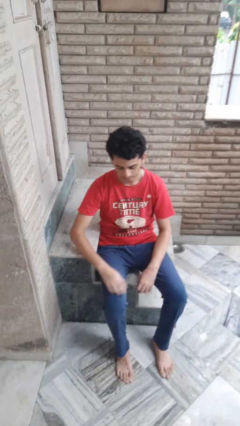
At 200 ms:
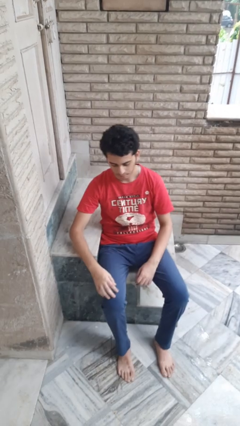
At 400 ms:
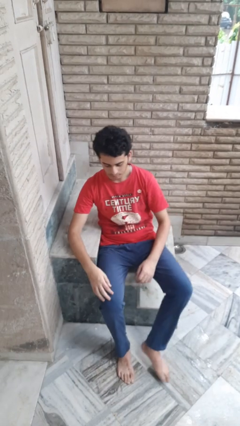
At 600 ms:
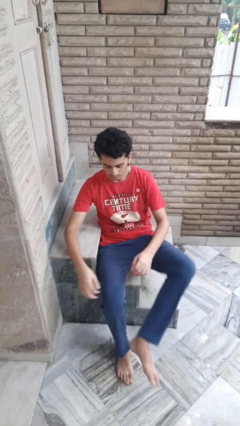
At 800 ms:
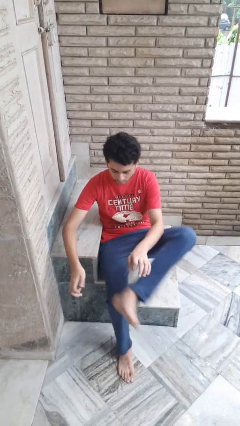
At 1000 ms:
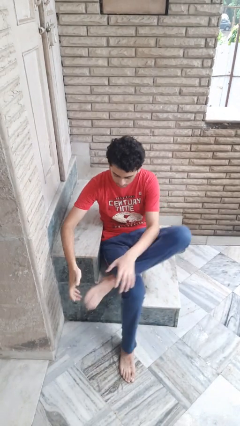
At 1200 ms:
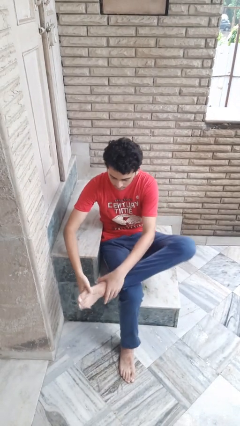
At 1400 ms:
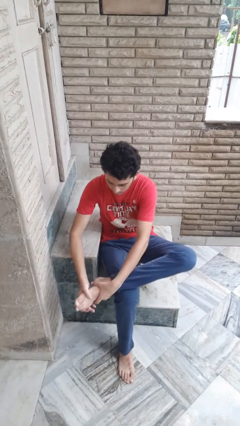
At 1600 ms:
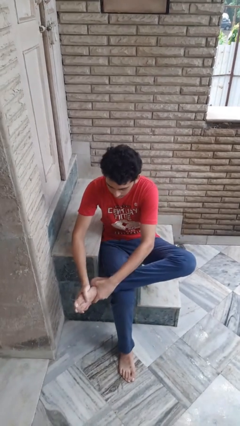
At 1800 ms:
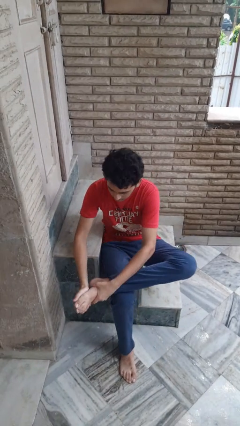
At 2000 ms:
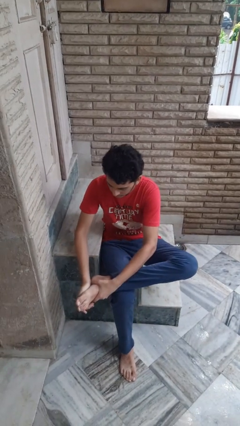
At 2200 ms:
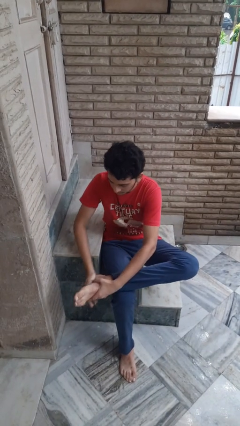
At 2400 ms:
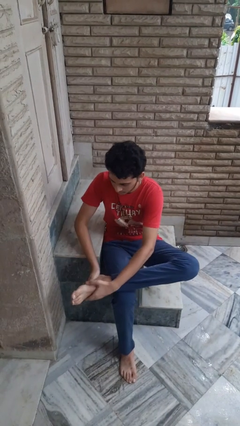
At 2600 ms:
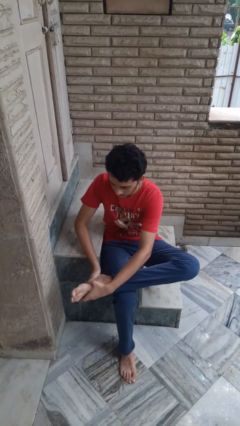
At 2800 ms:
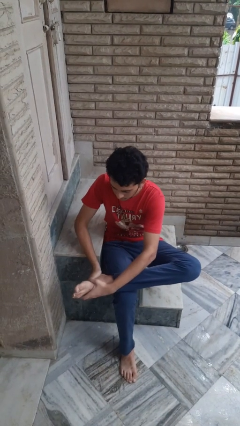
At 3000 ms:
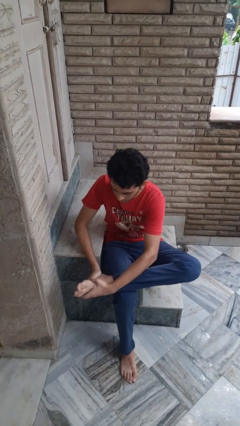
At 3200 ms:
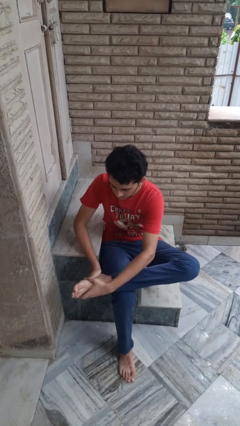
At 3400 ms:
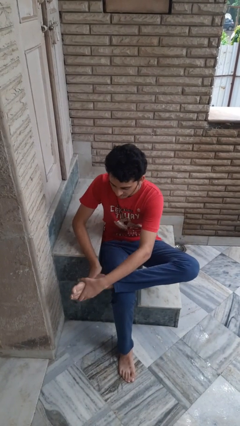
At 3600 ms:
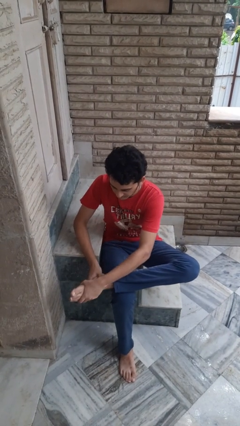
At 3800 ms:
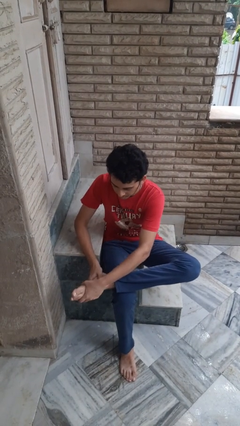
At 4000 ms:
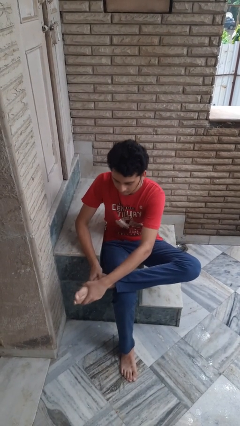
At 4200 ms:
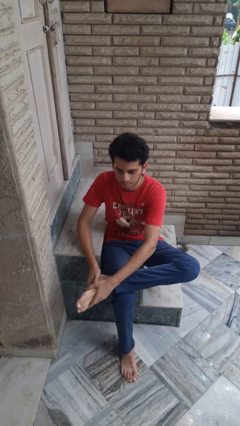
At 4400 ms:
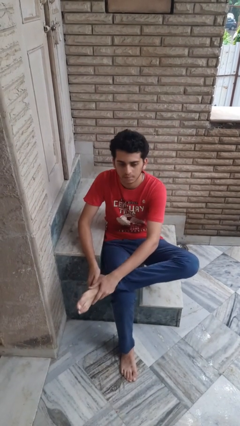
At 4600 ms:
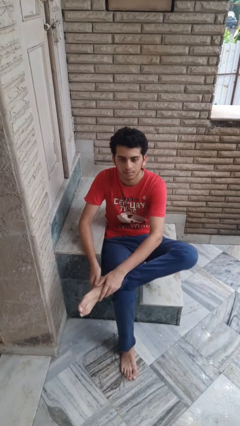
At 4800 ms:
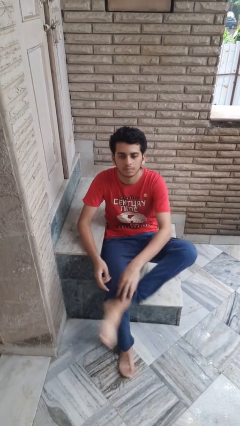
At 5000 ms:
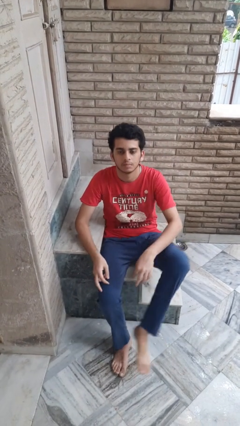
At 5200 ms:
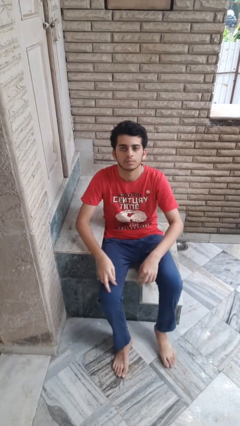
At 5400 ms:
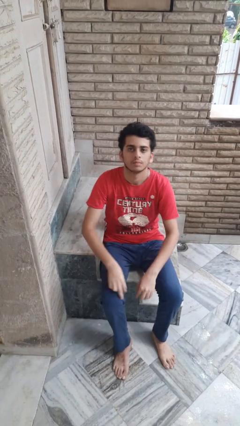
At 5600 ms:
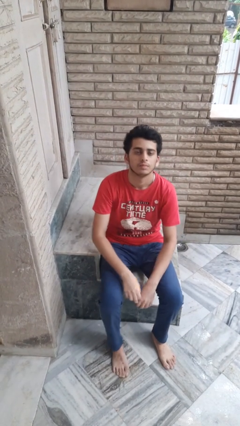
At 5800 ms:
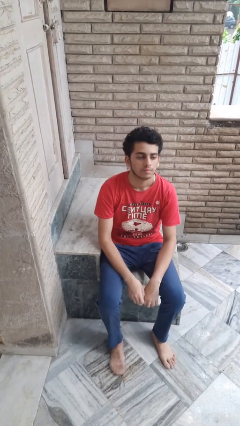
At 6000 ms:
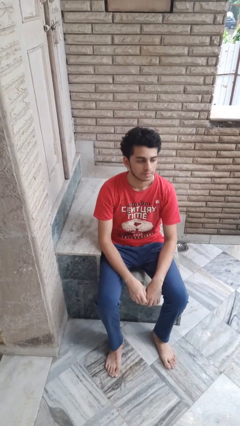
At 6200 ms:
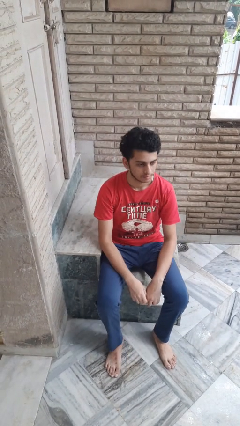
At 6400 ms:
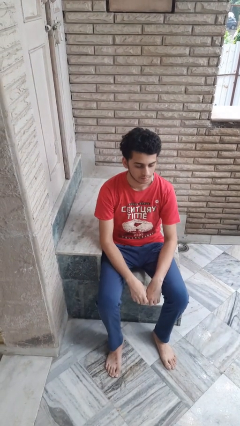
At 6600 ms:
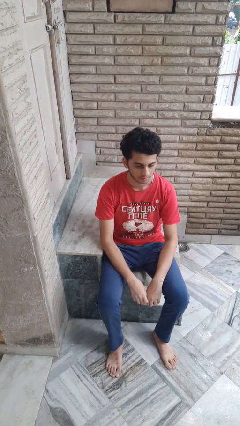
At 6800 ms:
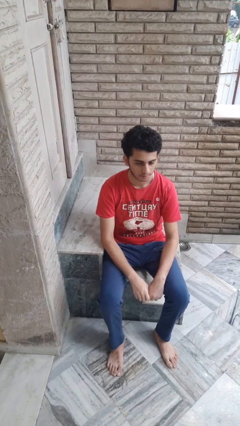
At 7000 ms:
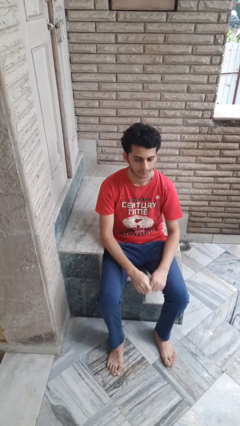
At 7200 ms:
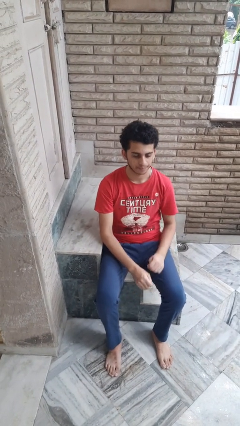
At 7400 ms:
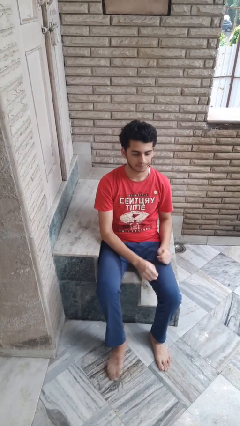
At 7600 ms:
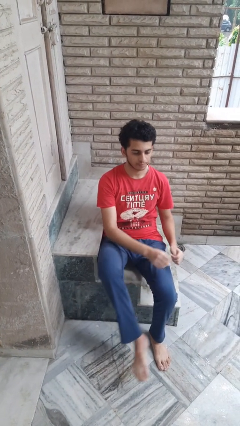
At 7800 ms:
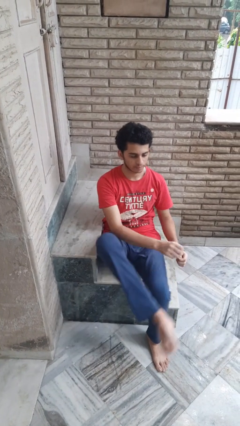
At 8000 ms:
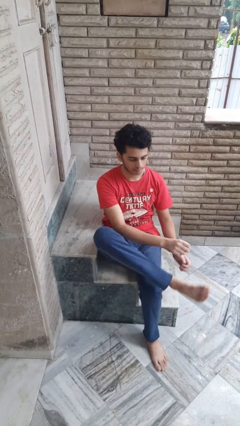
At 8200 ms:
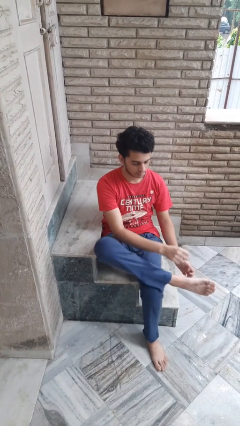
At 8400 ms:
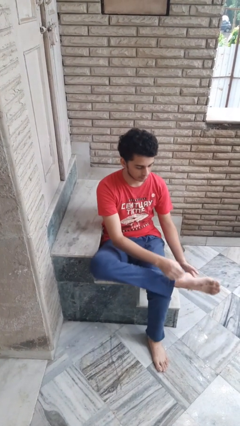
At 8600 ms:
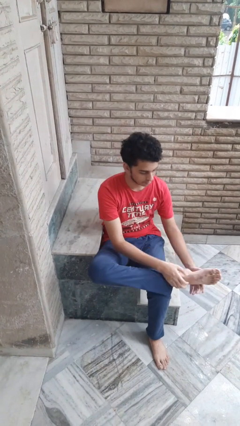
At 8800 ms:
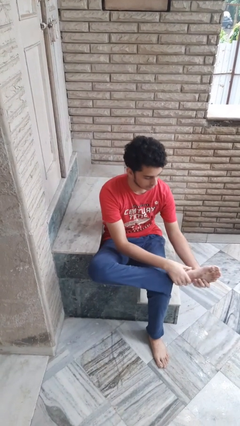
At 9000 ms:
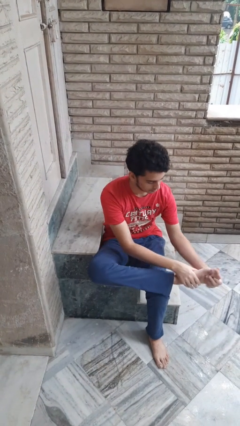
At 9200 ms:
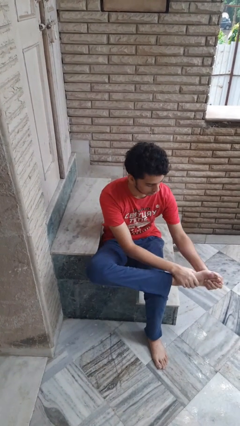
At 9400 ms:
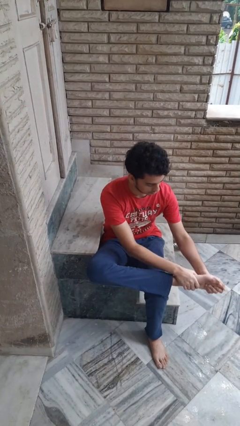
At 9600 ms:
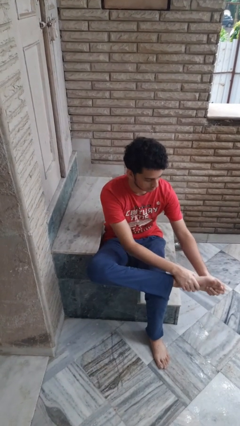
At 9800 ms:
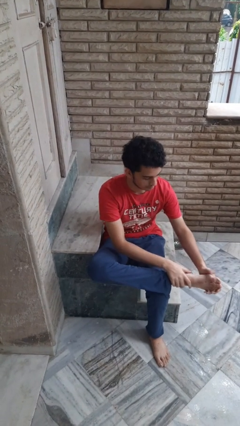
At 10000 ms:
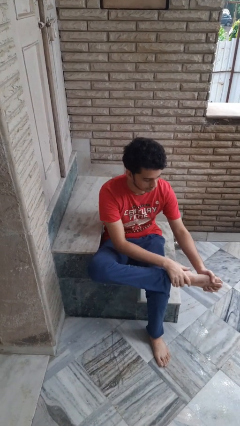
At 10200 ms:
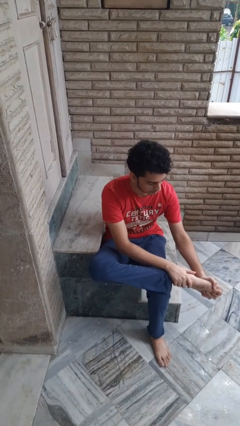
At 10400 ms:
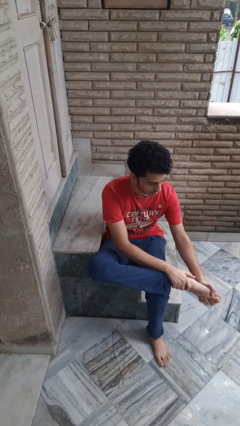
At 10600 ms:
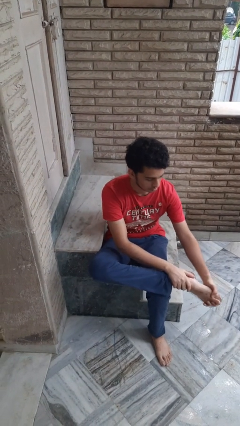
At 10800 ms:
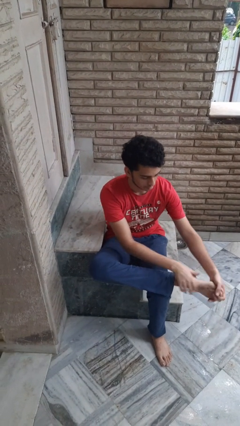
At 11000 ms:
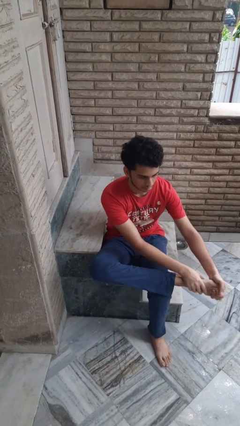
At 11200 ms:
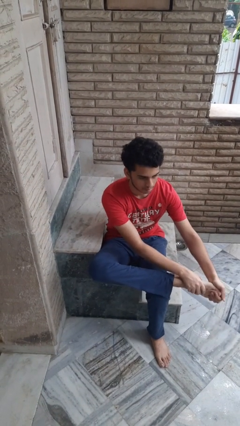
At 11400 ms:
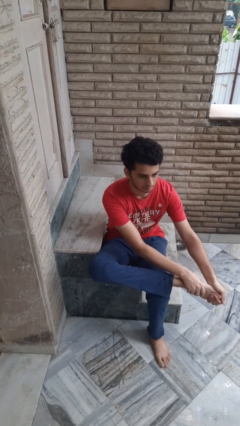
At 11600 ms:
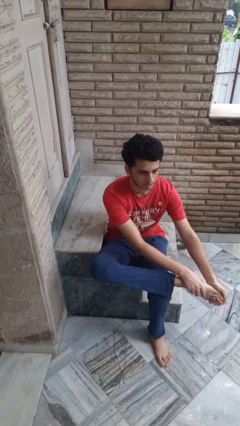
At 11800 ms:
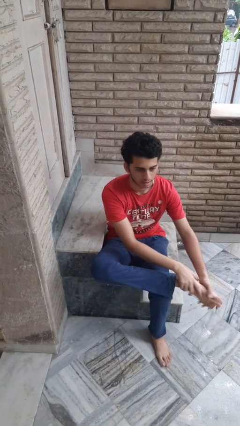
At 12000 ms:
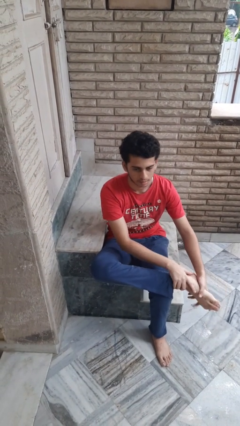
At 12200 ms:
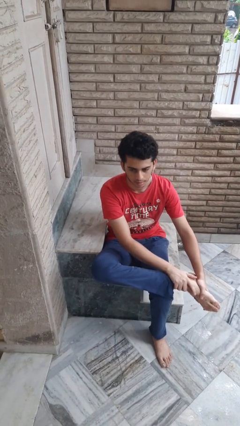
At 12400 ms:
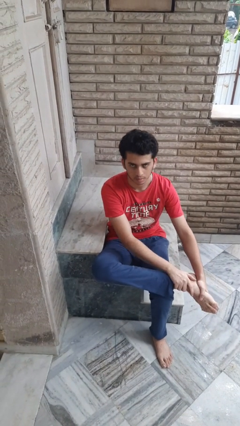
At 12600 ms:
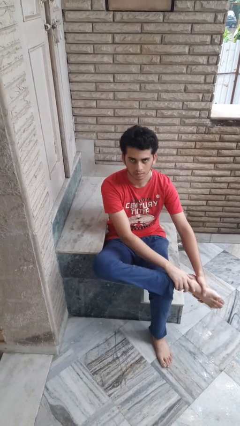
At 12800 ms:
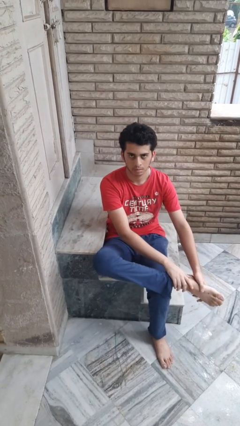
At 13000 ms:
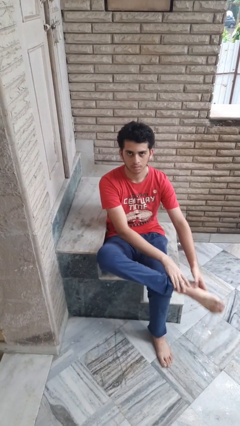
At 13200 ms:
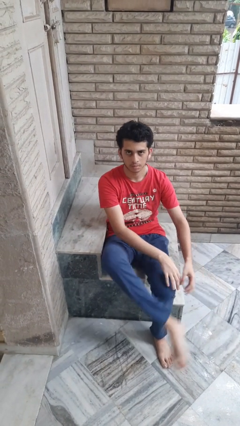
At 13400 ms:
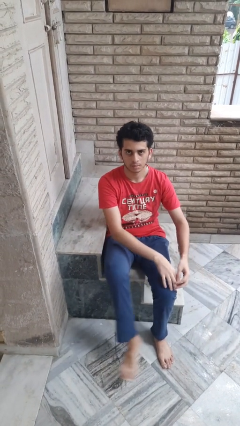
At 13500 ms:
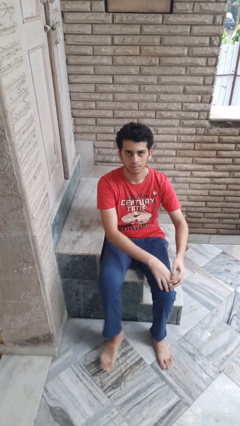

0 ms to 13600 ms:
person rubs foot

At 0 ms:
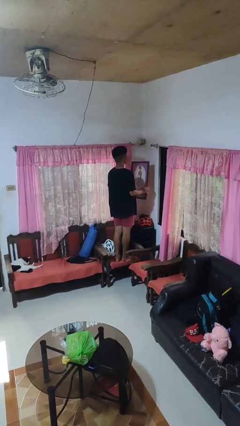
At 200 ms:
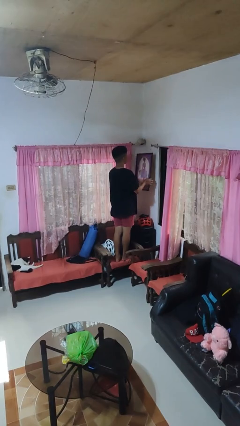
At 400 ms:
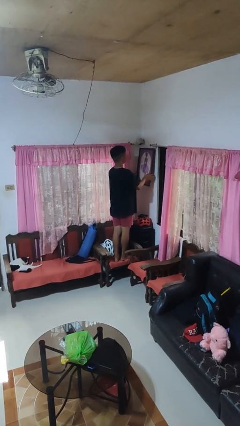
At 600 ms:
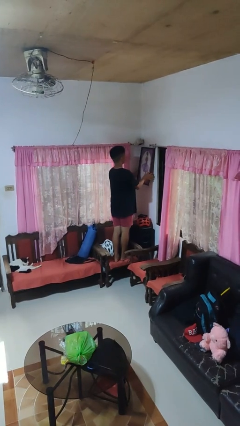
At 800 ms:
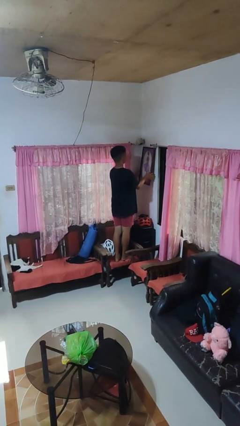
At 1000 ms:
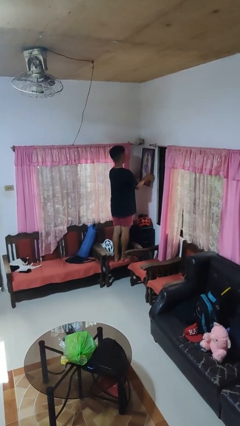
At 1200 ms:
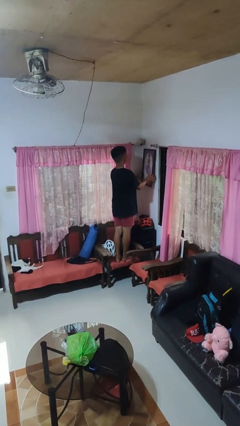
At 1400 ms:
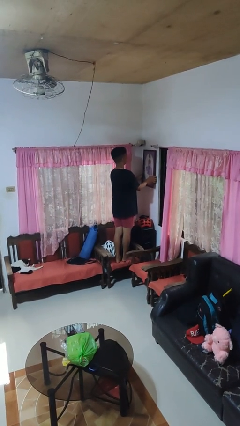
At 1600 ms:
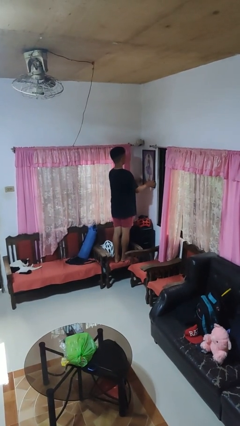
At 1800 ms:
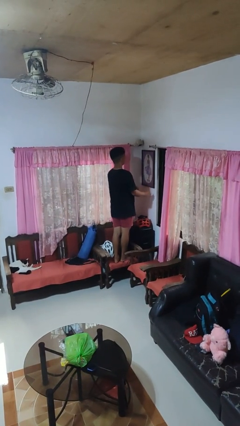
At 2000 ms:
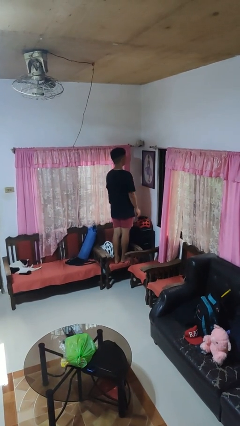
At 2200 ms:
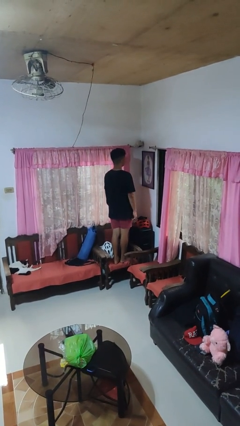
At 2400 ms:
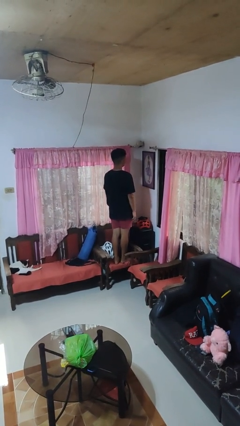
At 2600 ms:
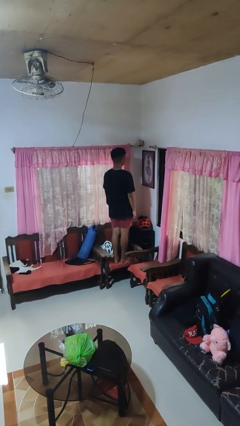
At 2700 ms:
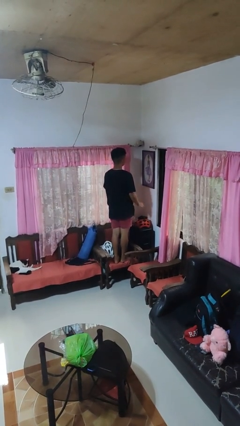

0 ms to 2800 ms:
person puts up picture frame

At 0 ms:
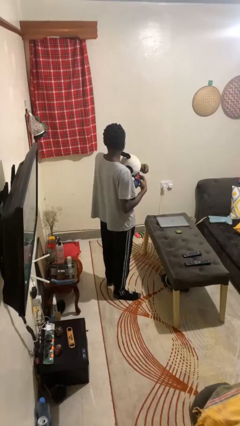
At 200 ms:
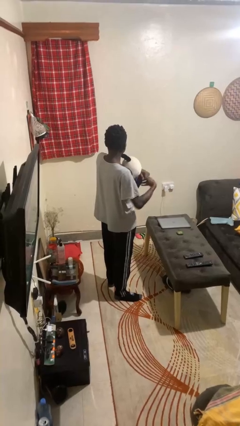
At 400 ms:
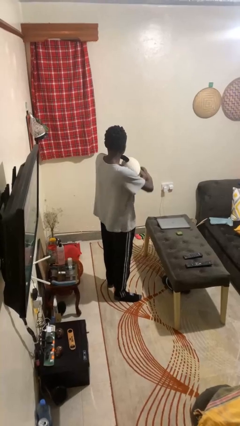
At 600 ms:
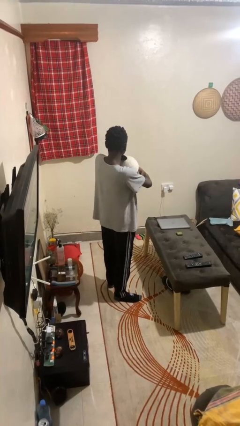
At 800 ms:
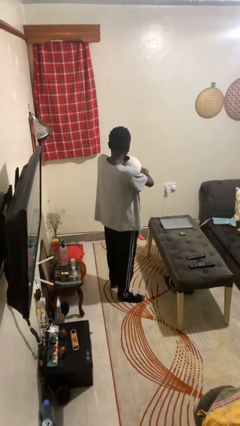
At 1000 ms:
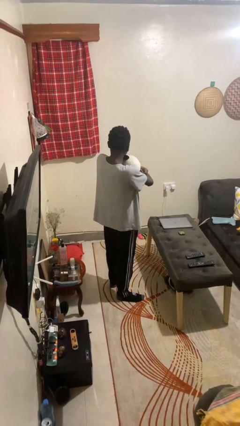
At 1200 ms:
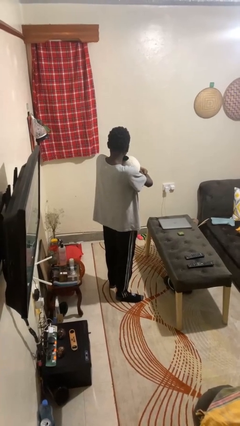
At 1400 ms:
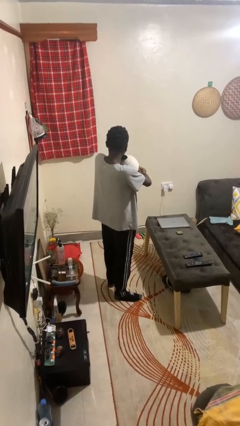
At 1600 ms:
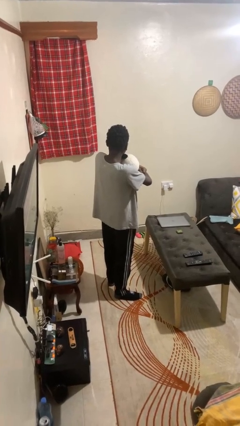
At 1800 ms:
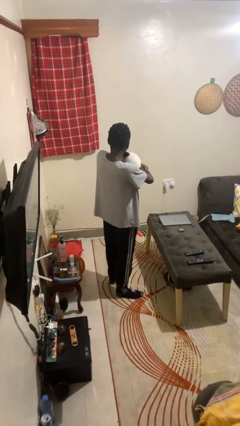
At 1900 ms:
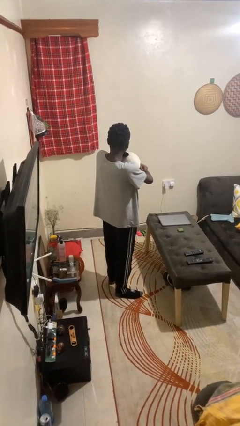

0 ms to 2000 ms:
person hugs stuffed animal
